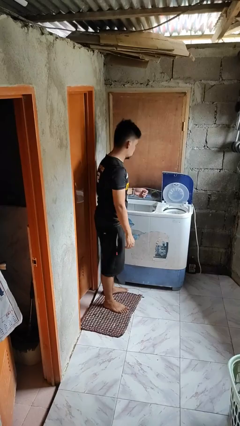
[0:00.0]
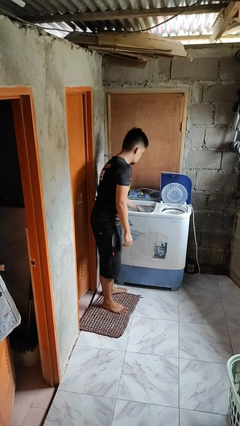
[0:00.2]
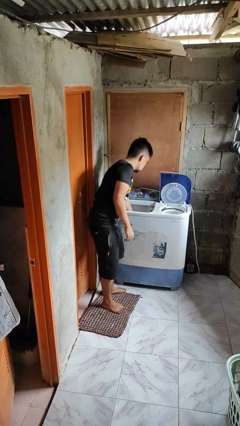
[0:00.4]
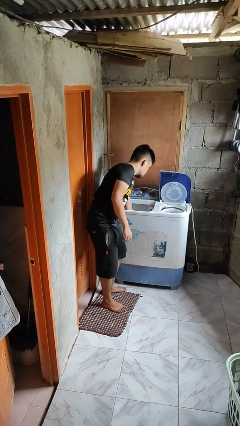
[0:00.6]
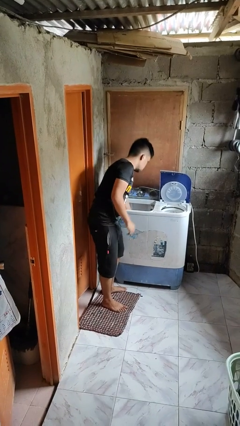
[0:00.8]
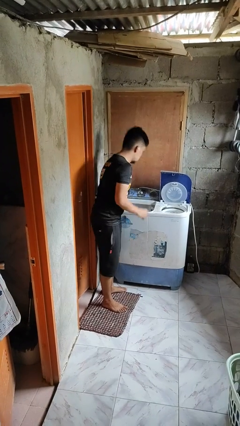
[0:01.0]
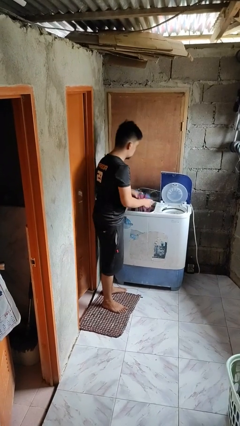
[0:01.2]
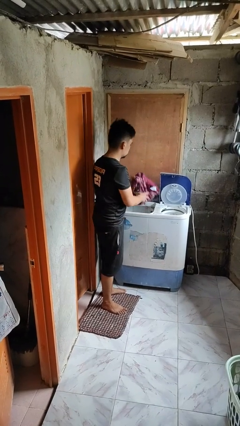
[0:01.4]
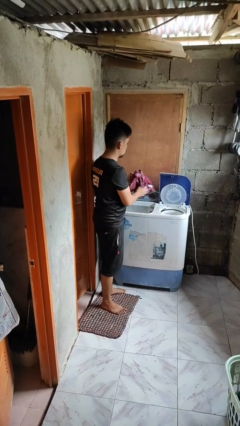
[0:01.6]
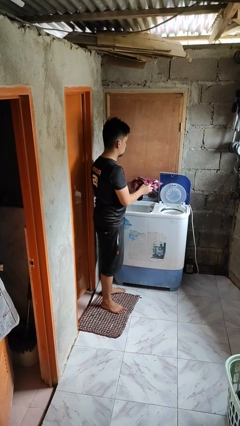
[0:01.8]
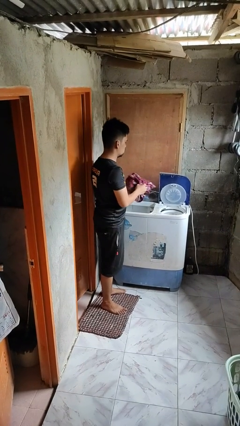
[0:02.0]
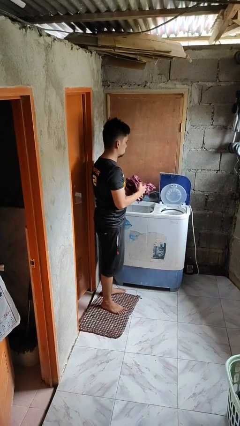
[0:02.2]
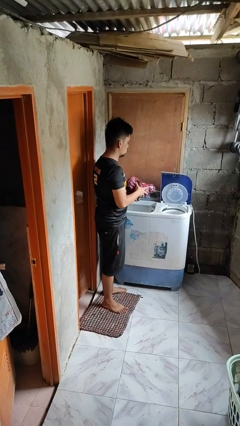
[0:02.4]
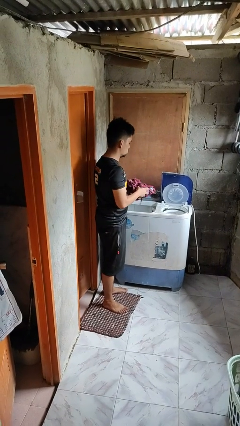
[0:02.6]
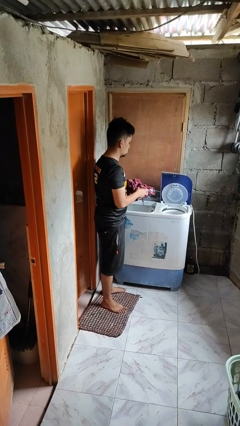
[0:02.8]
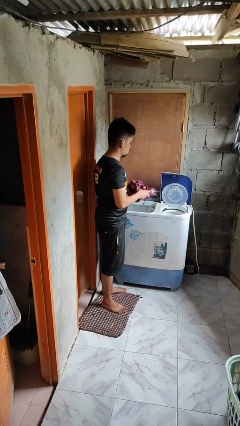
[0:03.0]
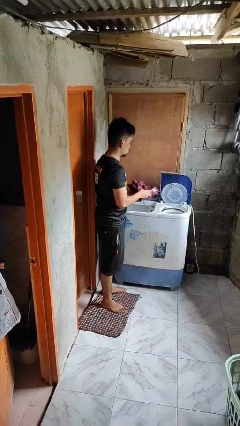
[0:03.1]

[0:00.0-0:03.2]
person unloads clotheswasher

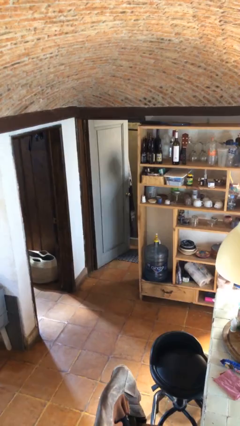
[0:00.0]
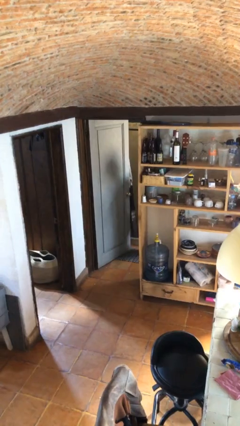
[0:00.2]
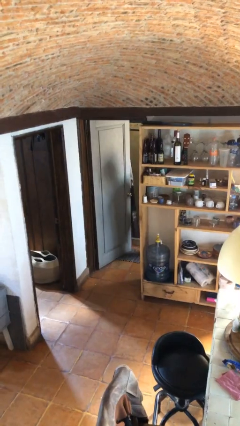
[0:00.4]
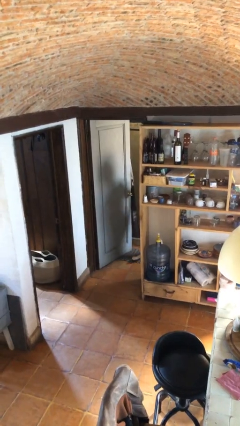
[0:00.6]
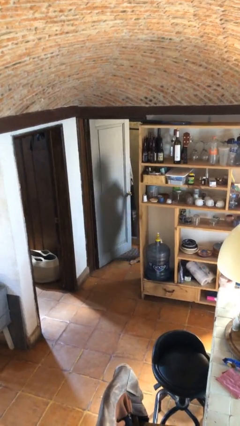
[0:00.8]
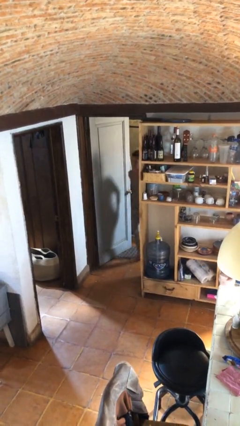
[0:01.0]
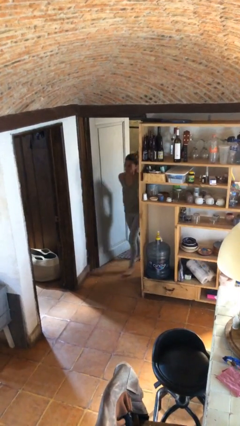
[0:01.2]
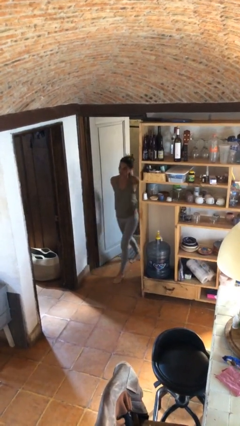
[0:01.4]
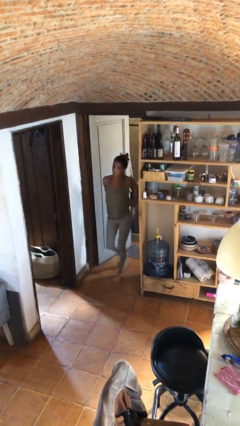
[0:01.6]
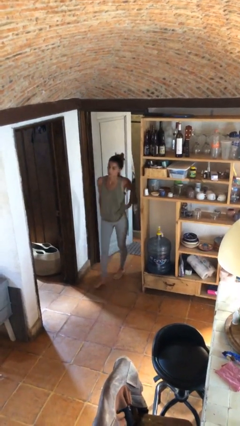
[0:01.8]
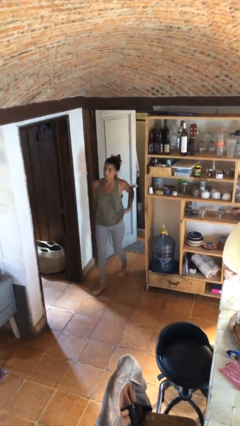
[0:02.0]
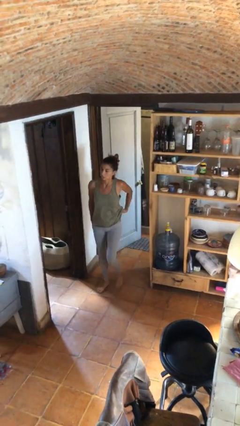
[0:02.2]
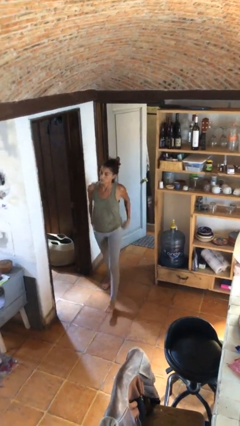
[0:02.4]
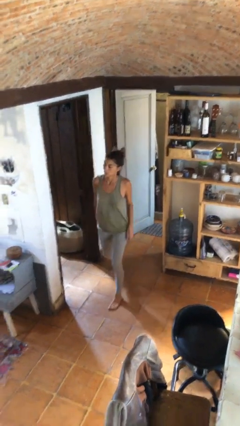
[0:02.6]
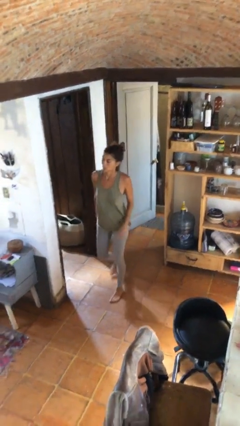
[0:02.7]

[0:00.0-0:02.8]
person enters scene through structure

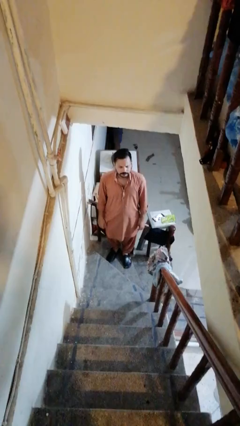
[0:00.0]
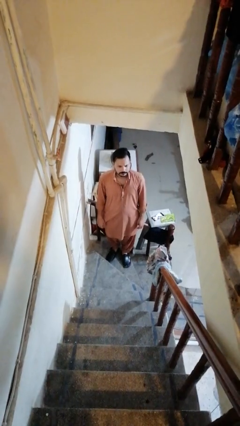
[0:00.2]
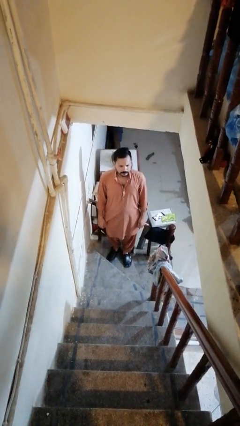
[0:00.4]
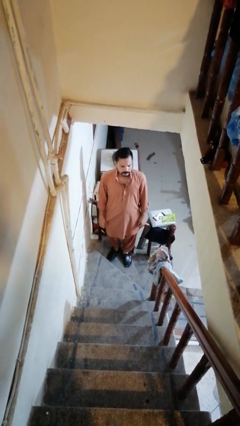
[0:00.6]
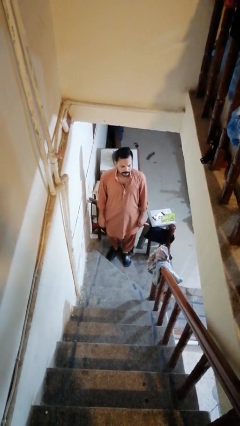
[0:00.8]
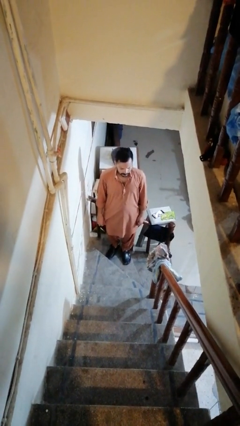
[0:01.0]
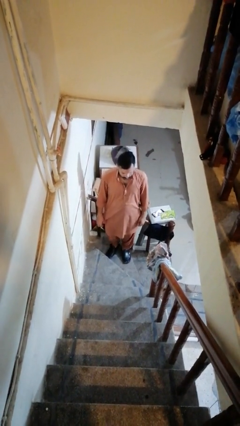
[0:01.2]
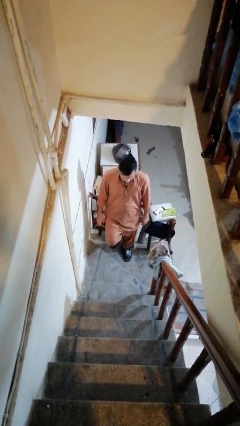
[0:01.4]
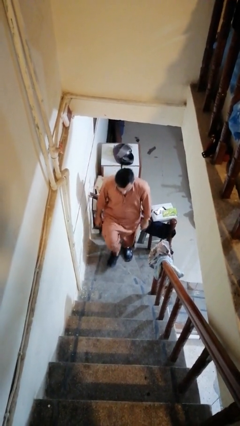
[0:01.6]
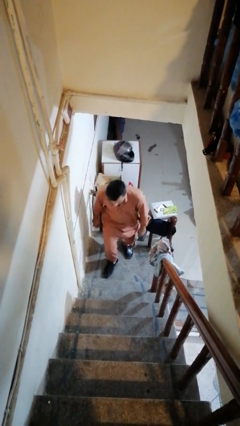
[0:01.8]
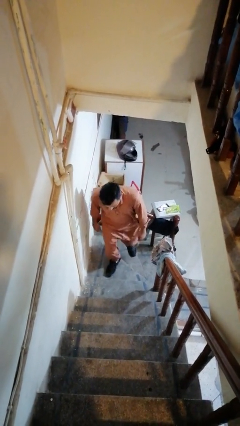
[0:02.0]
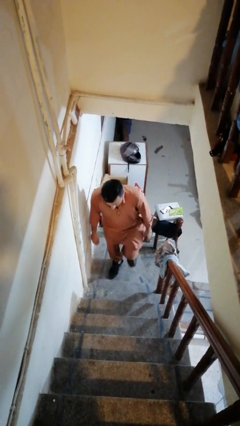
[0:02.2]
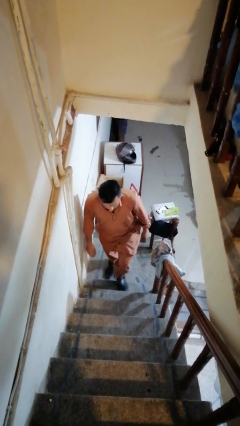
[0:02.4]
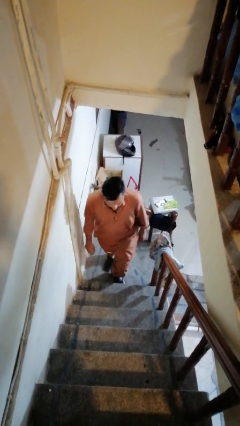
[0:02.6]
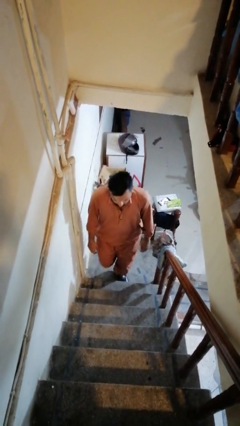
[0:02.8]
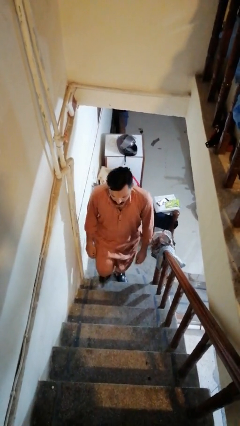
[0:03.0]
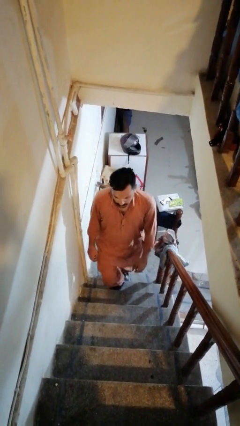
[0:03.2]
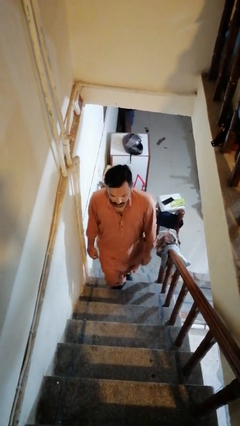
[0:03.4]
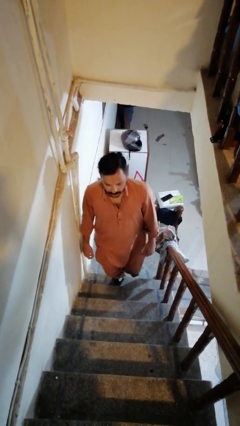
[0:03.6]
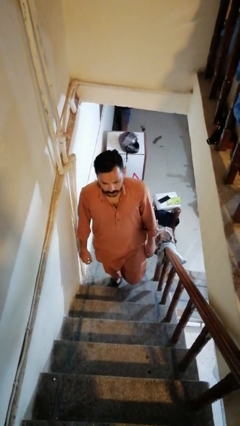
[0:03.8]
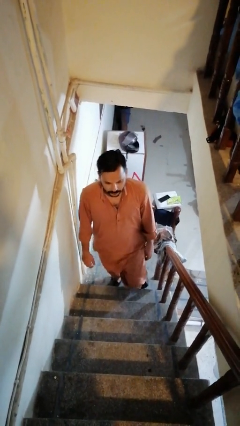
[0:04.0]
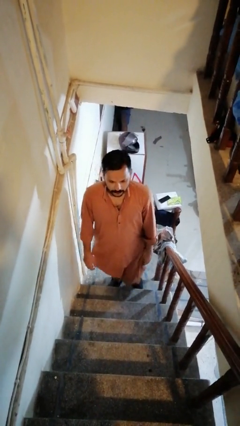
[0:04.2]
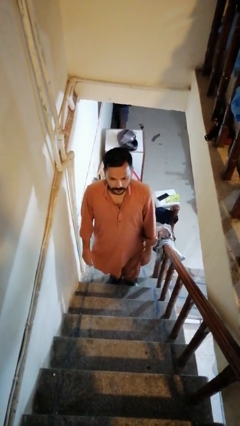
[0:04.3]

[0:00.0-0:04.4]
person climbs up stairs

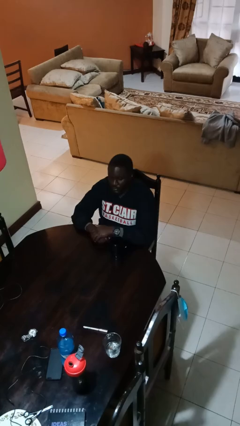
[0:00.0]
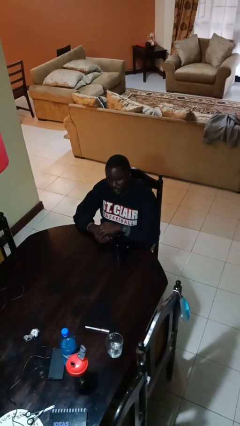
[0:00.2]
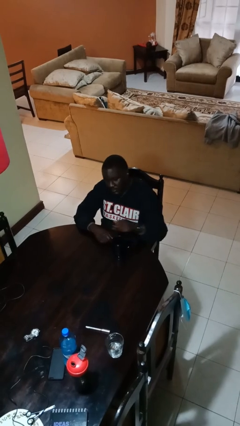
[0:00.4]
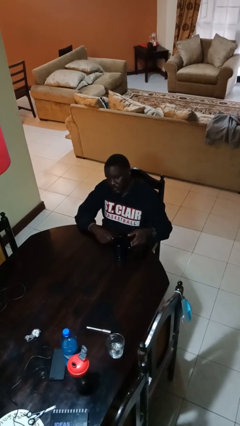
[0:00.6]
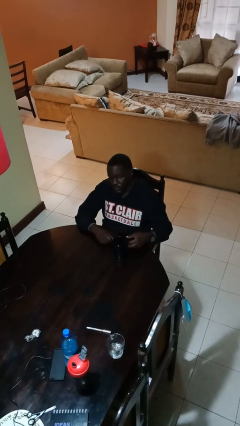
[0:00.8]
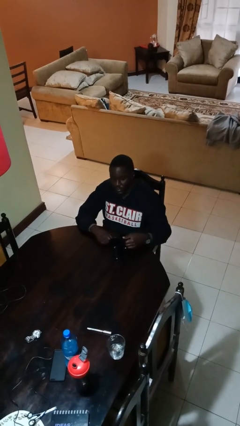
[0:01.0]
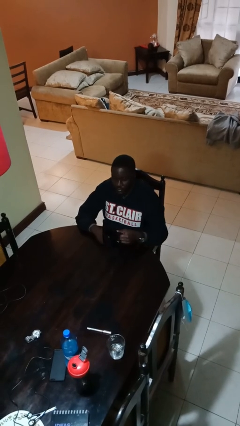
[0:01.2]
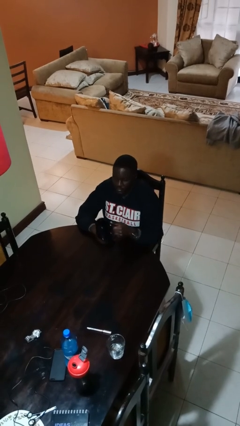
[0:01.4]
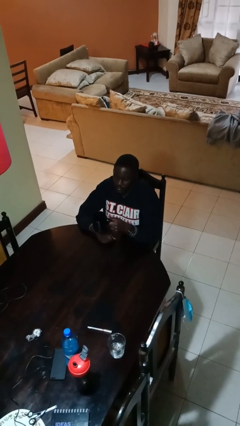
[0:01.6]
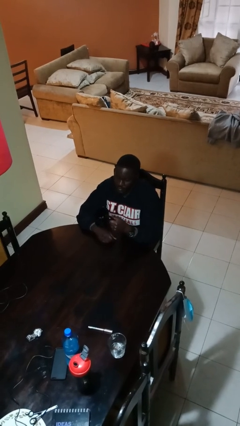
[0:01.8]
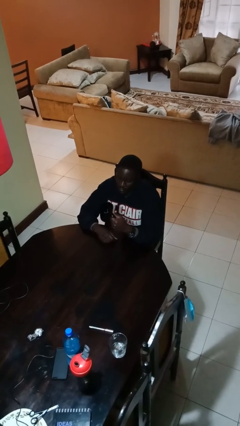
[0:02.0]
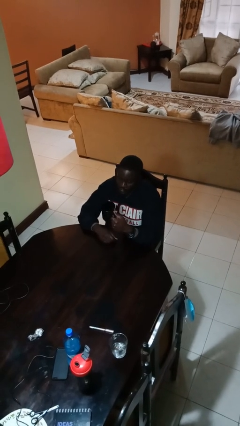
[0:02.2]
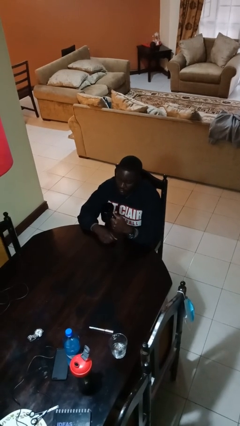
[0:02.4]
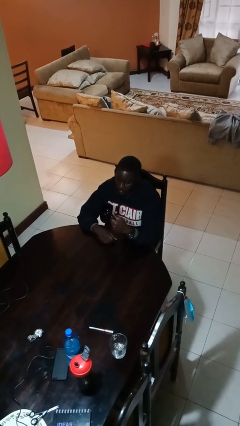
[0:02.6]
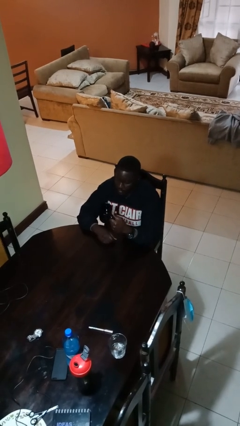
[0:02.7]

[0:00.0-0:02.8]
person picks up object from table

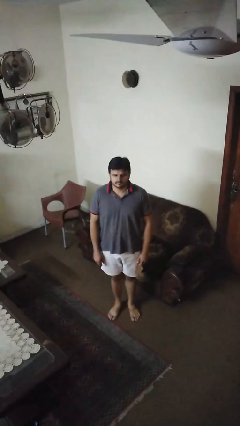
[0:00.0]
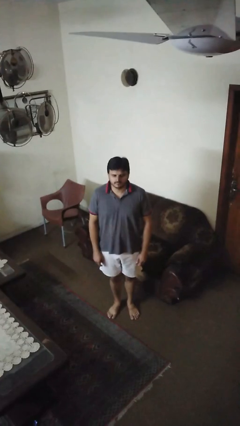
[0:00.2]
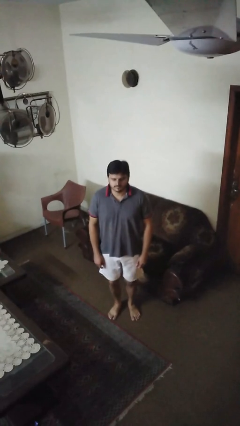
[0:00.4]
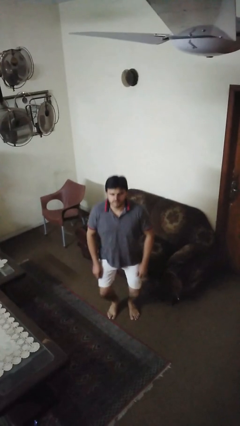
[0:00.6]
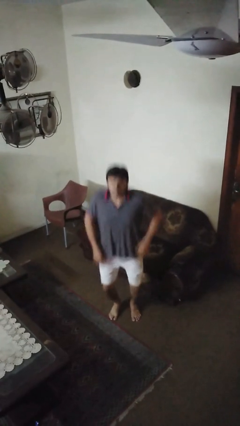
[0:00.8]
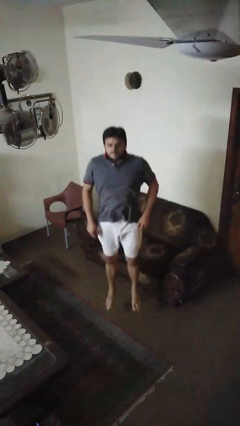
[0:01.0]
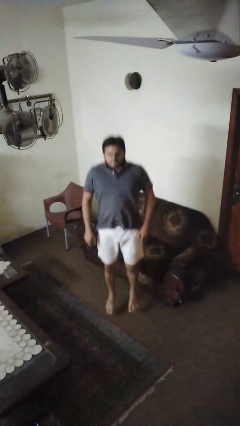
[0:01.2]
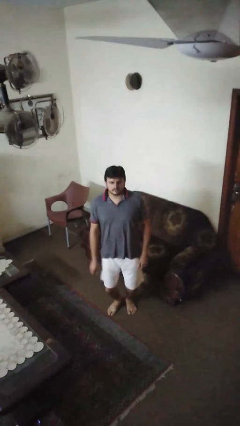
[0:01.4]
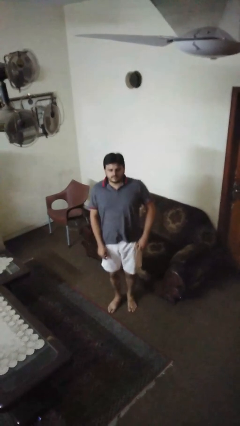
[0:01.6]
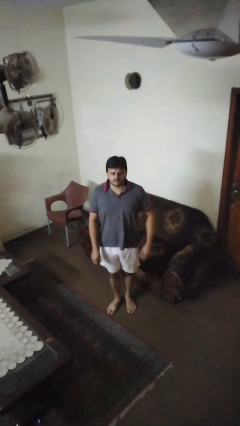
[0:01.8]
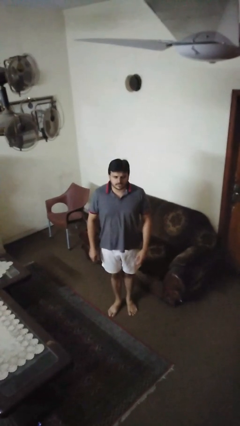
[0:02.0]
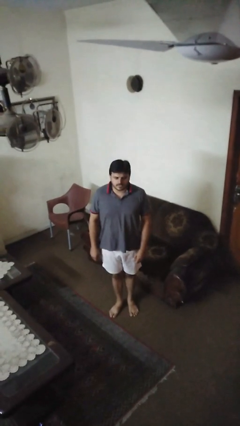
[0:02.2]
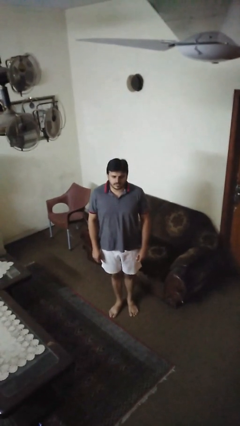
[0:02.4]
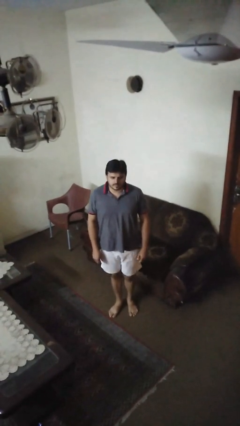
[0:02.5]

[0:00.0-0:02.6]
person jumps

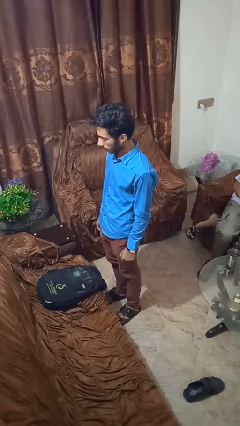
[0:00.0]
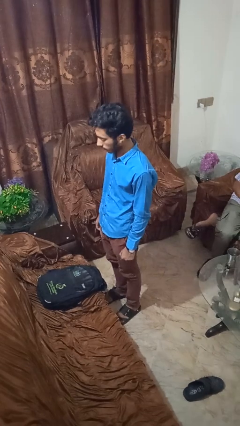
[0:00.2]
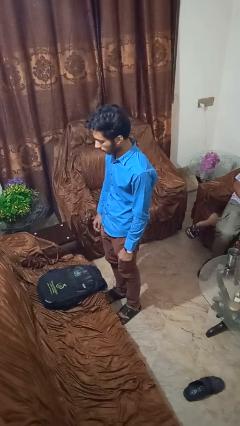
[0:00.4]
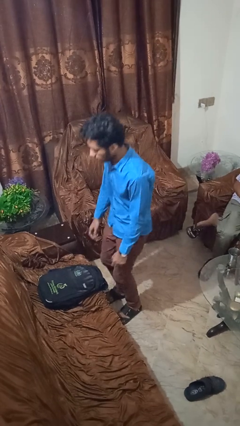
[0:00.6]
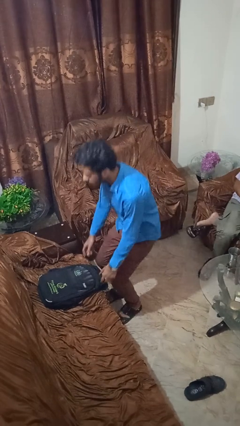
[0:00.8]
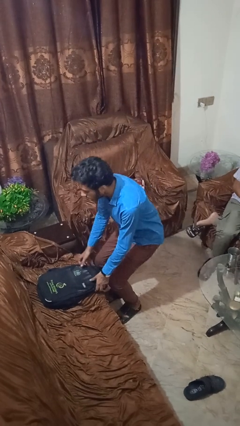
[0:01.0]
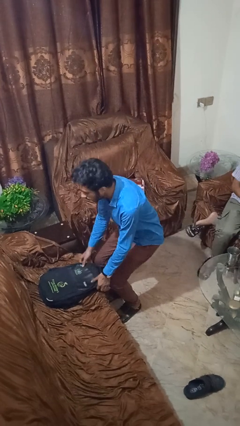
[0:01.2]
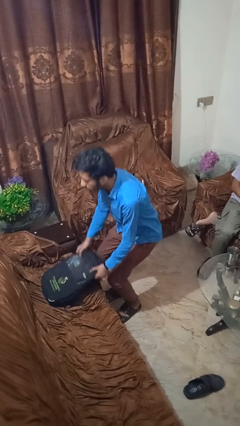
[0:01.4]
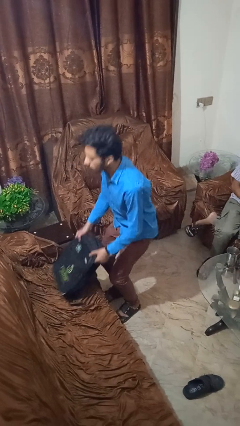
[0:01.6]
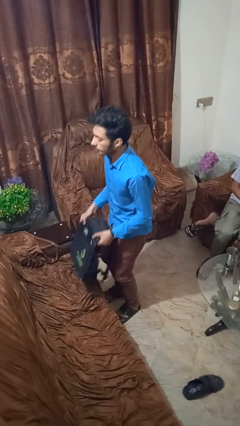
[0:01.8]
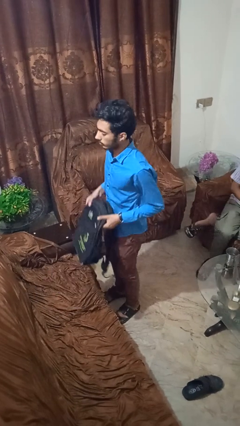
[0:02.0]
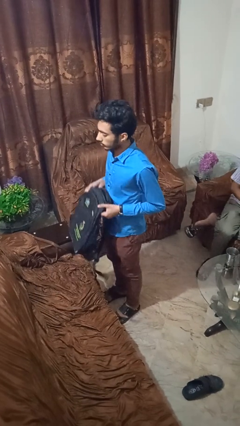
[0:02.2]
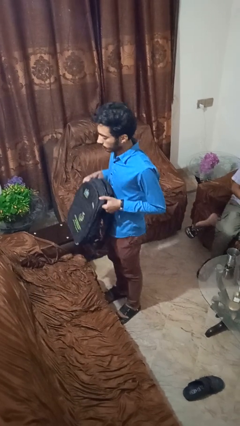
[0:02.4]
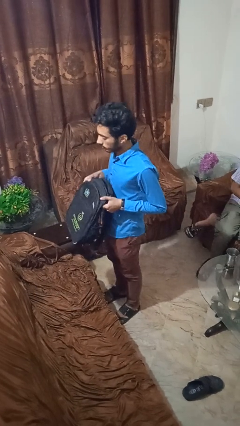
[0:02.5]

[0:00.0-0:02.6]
person picks up object from couch
